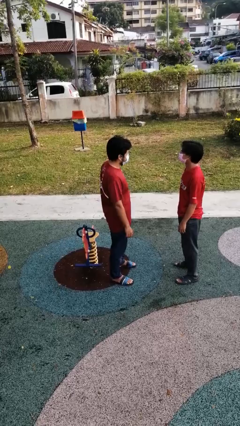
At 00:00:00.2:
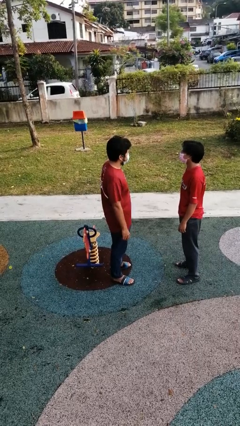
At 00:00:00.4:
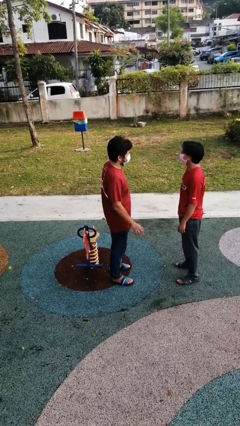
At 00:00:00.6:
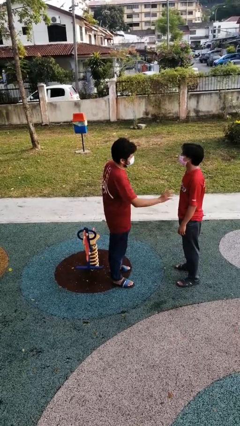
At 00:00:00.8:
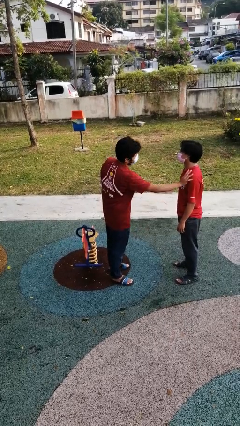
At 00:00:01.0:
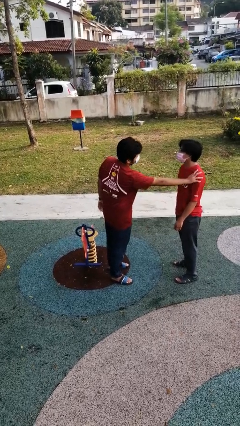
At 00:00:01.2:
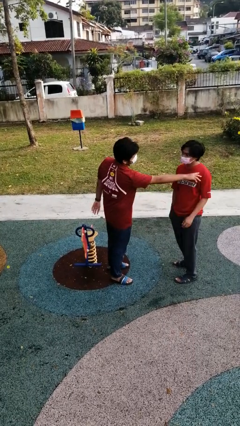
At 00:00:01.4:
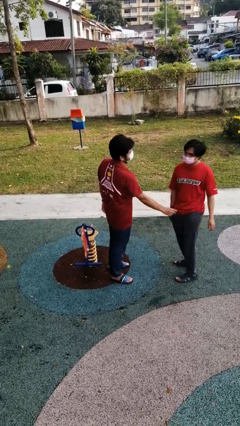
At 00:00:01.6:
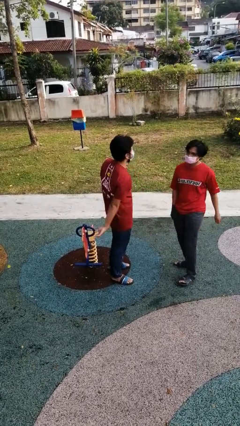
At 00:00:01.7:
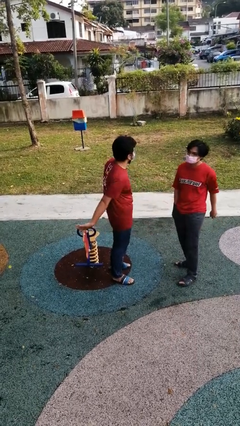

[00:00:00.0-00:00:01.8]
person shoves person

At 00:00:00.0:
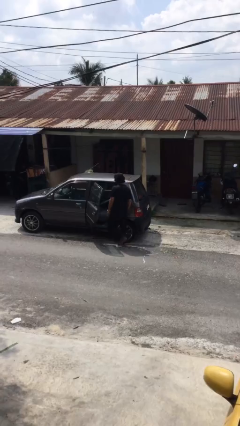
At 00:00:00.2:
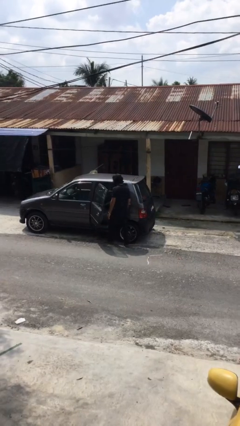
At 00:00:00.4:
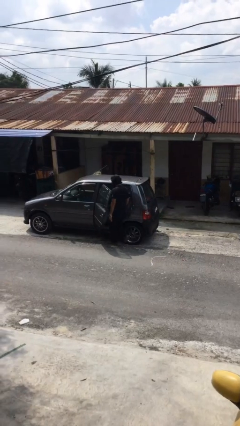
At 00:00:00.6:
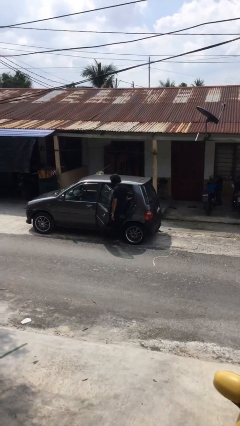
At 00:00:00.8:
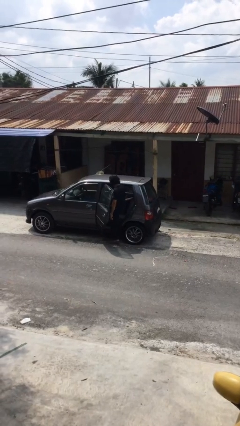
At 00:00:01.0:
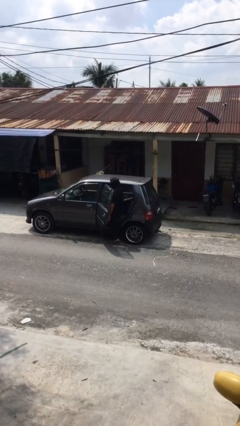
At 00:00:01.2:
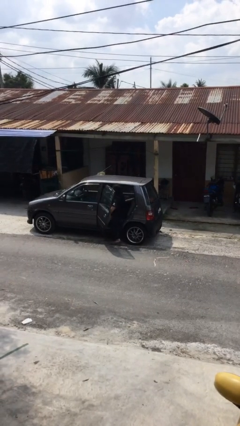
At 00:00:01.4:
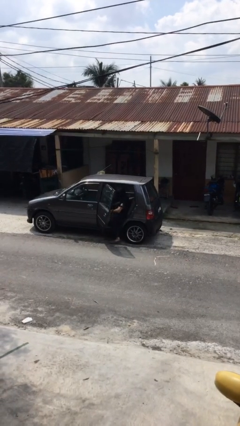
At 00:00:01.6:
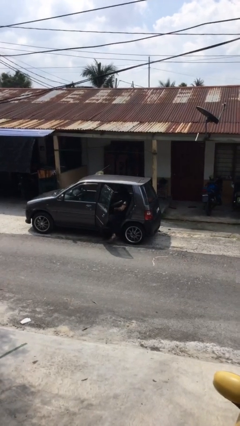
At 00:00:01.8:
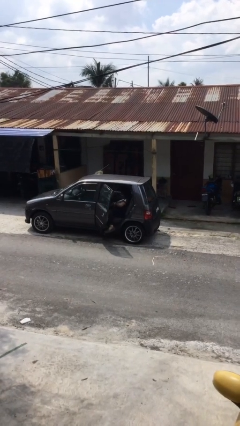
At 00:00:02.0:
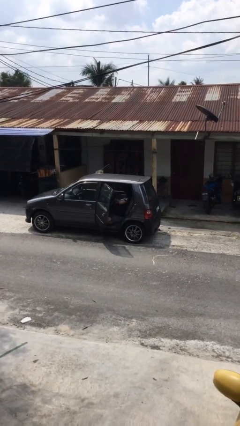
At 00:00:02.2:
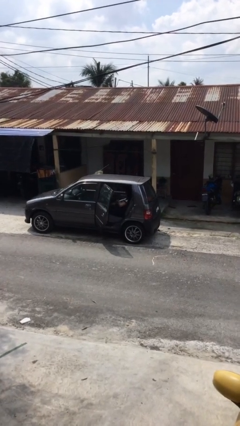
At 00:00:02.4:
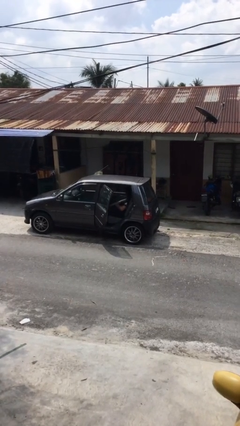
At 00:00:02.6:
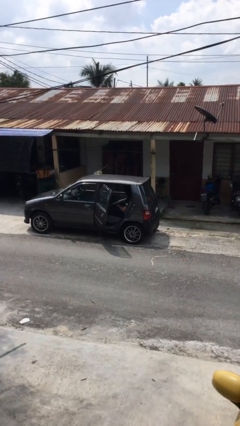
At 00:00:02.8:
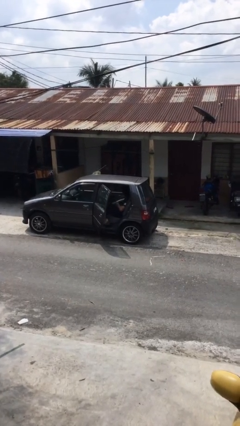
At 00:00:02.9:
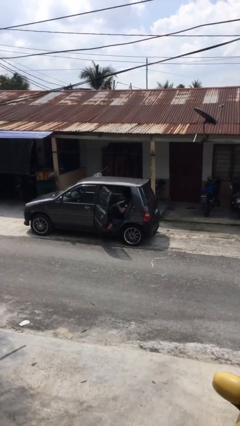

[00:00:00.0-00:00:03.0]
person enters car

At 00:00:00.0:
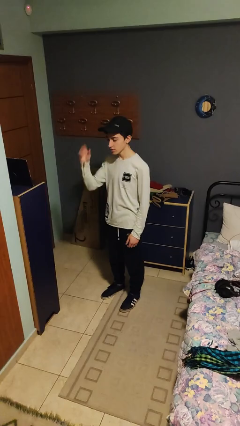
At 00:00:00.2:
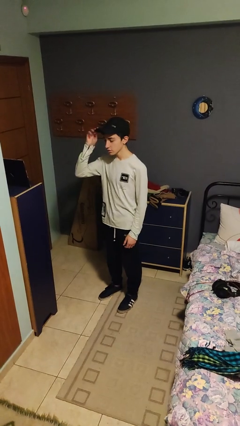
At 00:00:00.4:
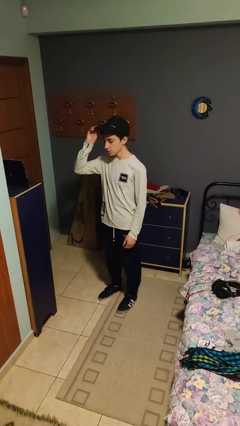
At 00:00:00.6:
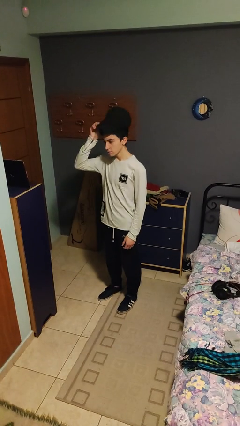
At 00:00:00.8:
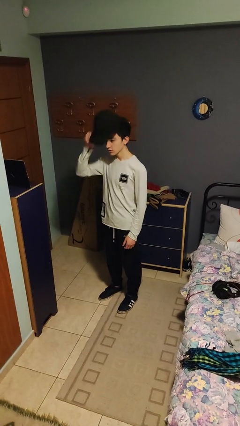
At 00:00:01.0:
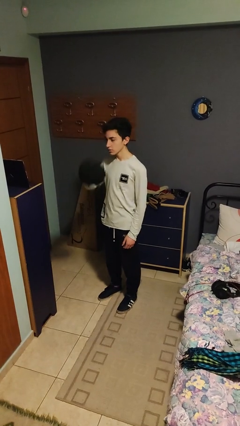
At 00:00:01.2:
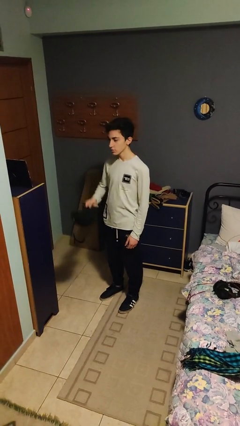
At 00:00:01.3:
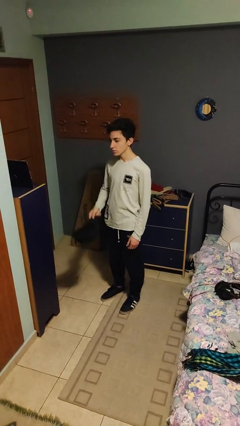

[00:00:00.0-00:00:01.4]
person takes off hat

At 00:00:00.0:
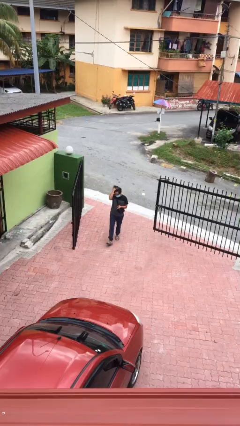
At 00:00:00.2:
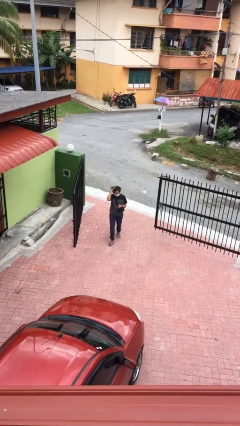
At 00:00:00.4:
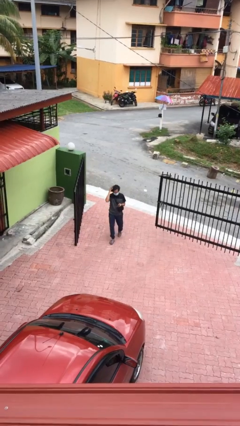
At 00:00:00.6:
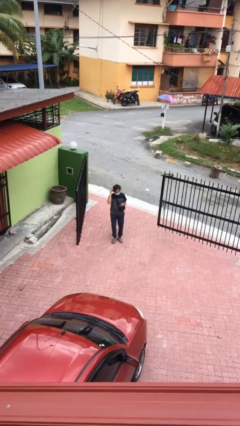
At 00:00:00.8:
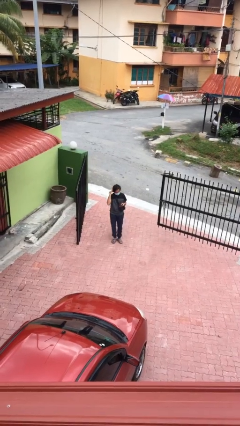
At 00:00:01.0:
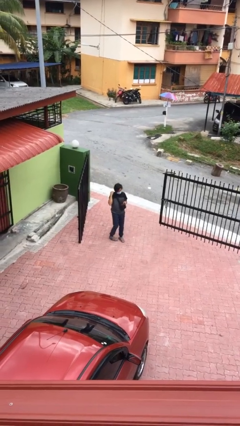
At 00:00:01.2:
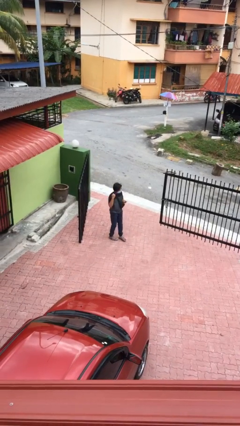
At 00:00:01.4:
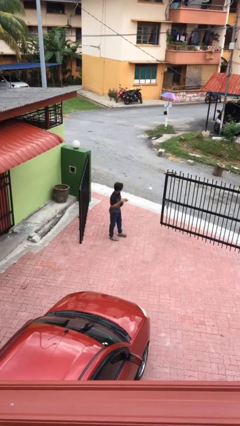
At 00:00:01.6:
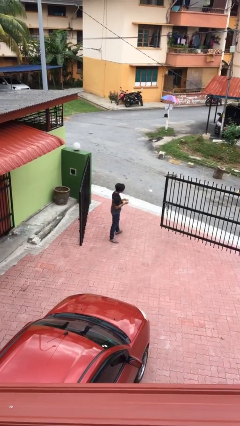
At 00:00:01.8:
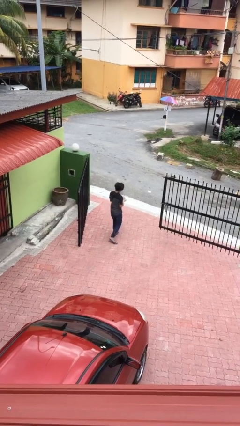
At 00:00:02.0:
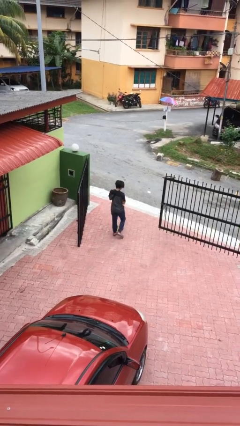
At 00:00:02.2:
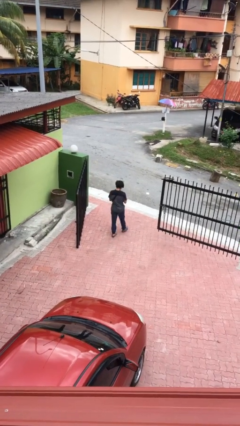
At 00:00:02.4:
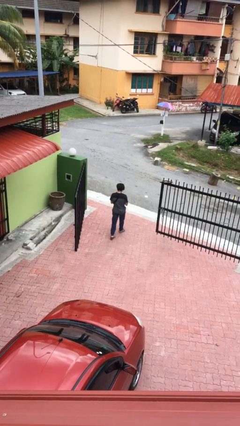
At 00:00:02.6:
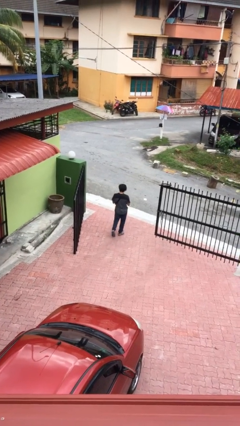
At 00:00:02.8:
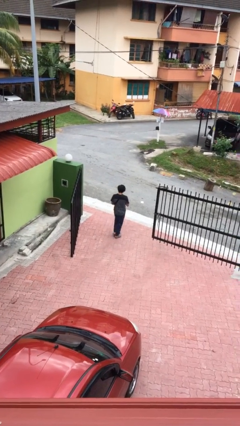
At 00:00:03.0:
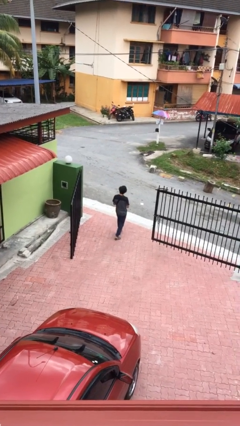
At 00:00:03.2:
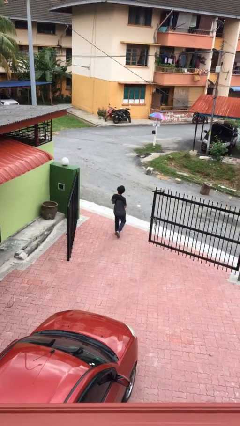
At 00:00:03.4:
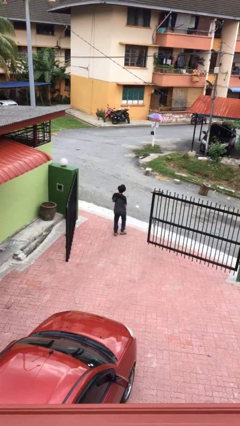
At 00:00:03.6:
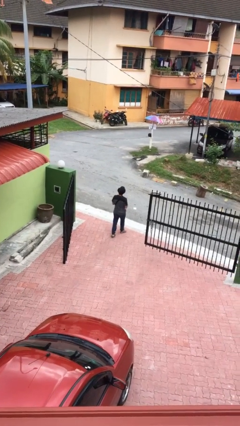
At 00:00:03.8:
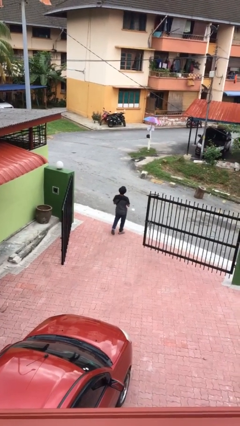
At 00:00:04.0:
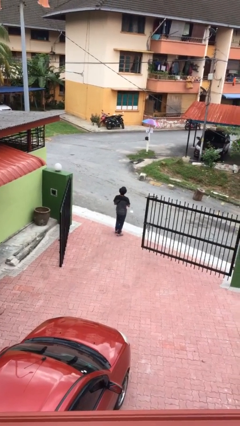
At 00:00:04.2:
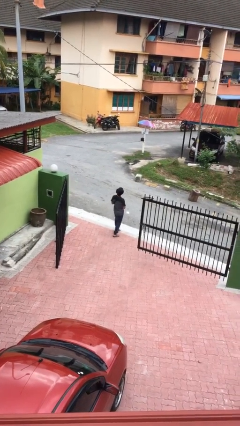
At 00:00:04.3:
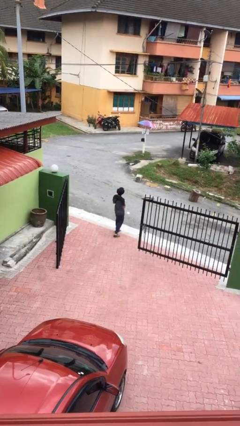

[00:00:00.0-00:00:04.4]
person exits scene through structure

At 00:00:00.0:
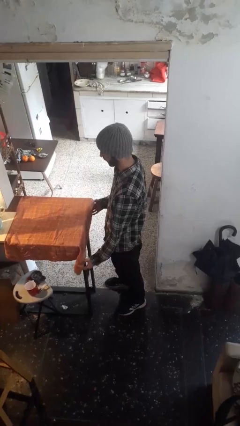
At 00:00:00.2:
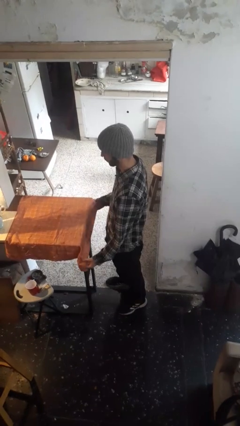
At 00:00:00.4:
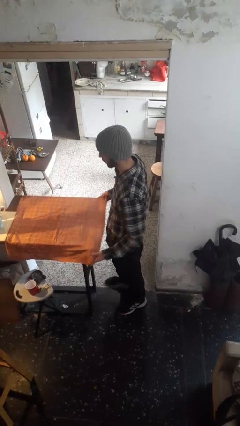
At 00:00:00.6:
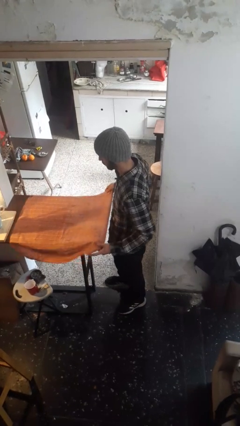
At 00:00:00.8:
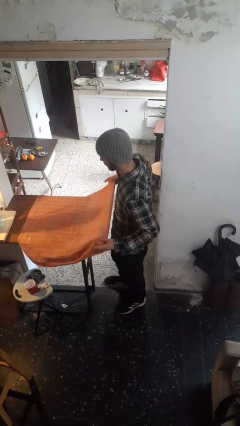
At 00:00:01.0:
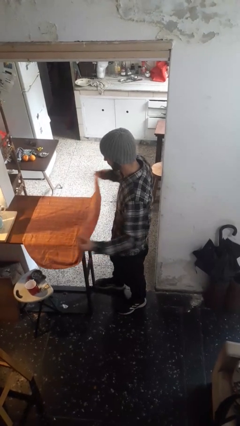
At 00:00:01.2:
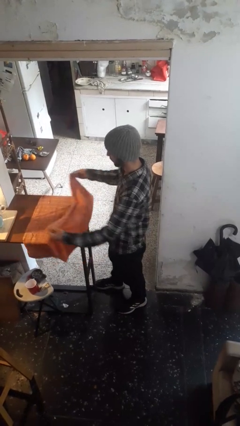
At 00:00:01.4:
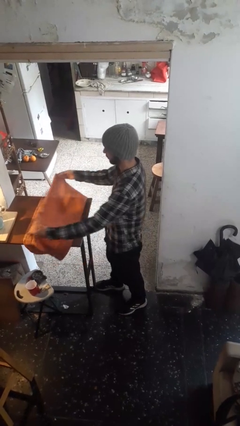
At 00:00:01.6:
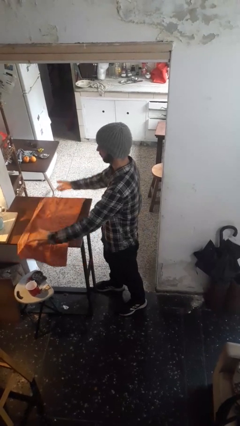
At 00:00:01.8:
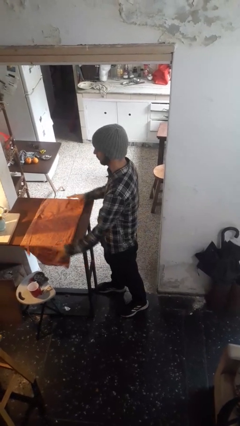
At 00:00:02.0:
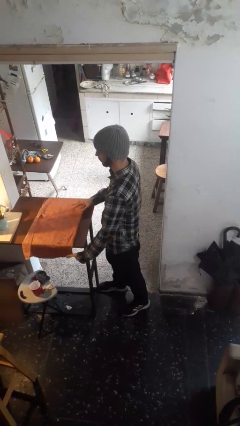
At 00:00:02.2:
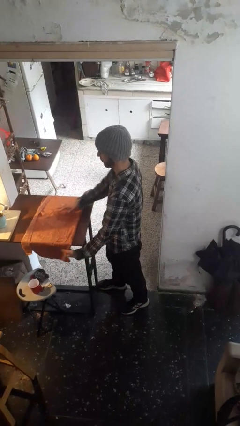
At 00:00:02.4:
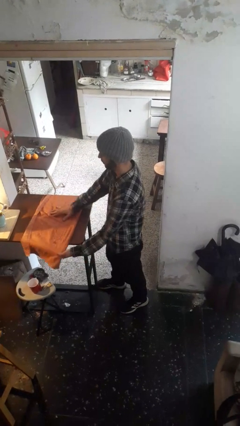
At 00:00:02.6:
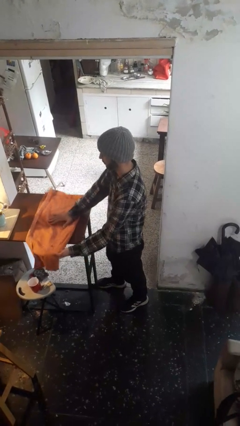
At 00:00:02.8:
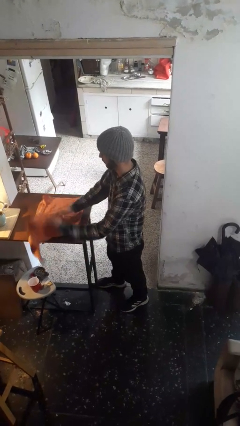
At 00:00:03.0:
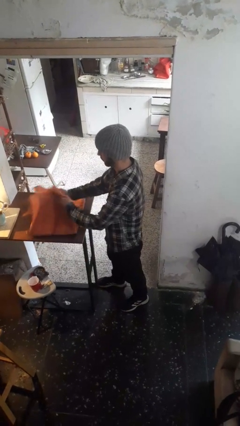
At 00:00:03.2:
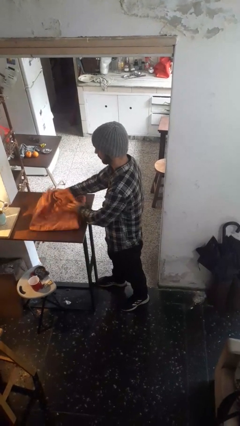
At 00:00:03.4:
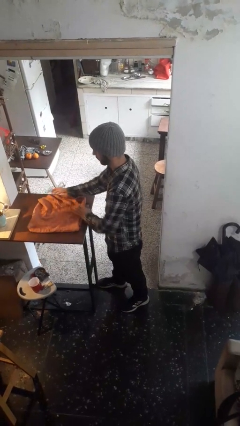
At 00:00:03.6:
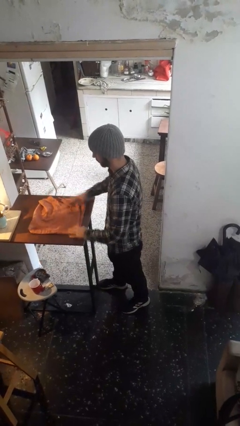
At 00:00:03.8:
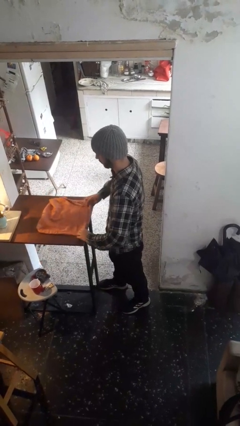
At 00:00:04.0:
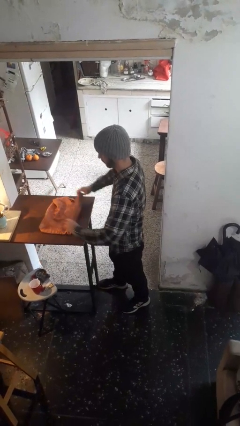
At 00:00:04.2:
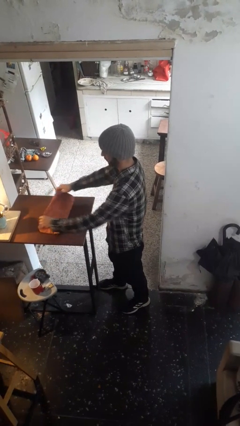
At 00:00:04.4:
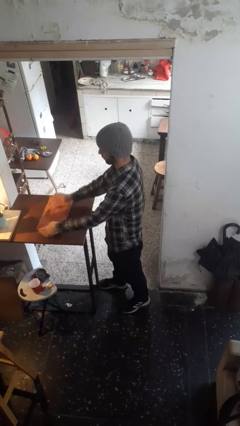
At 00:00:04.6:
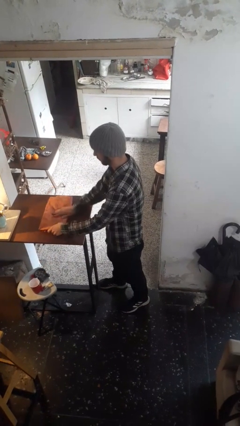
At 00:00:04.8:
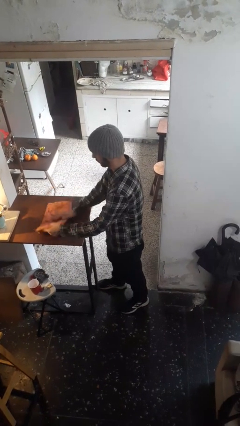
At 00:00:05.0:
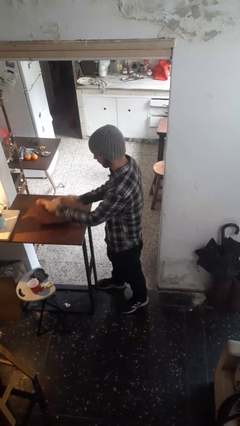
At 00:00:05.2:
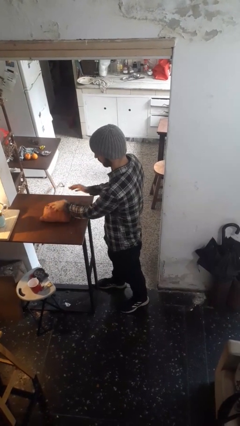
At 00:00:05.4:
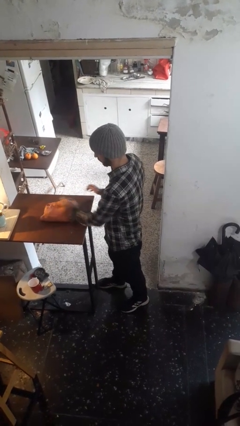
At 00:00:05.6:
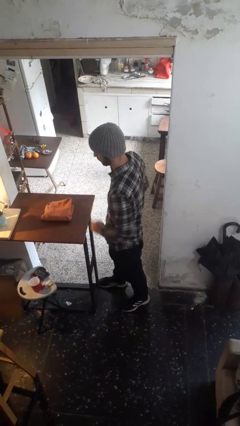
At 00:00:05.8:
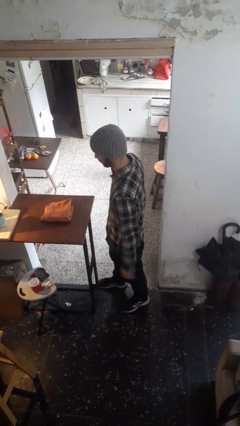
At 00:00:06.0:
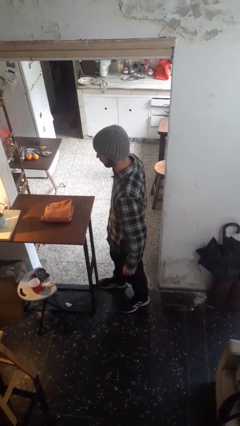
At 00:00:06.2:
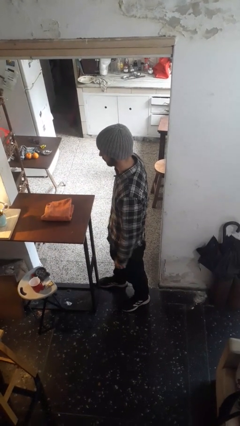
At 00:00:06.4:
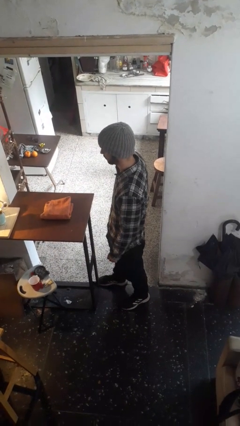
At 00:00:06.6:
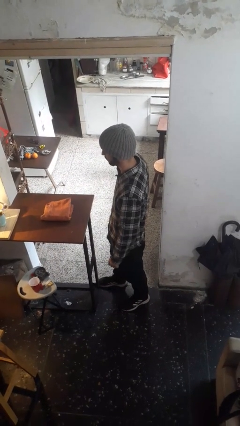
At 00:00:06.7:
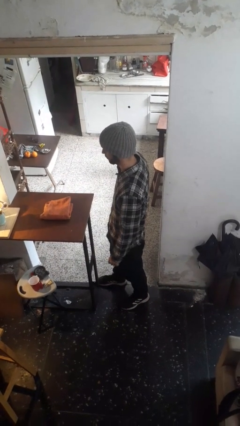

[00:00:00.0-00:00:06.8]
person folds tablecloth
